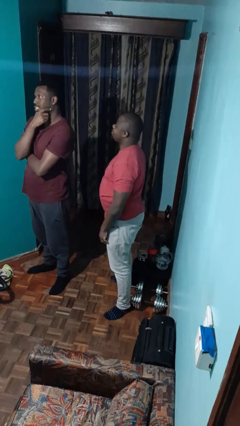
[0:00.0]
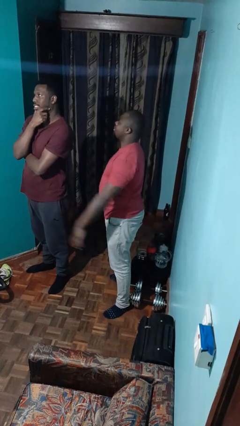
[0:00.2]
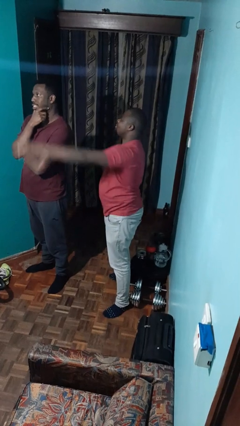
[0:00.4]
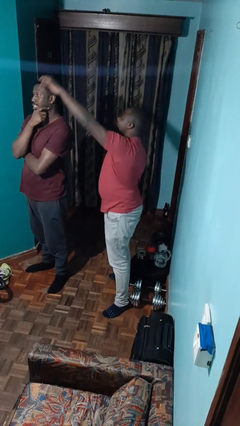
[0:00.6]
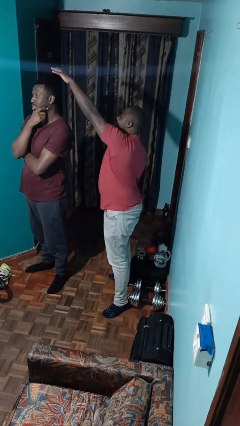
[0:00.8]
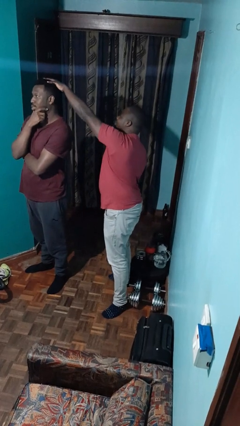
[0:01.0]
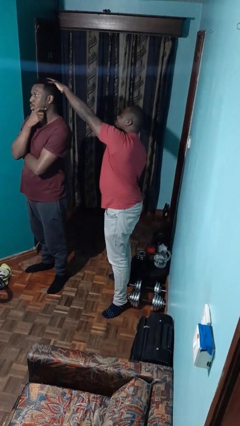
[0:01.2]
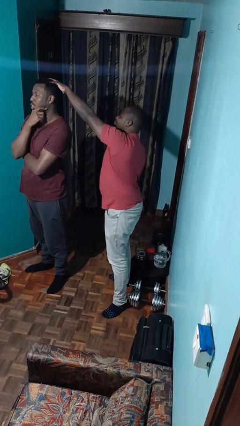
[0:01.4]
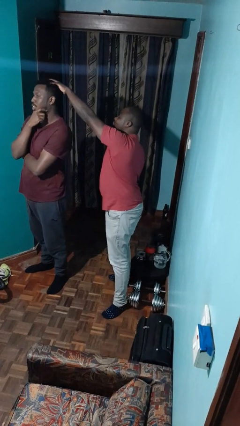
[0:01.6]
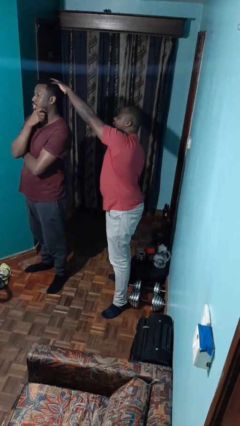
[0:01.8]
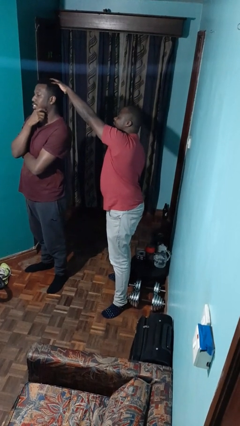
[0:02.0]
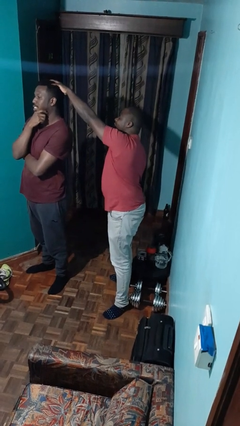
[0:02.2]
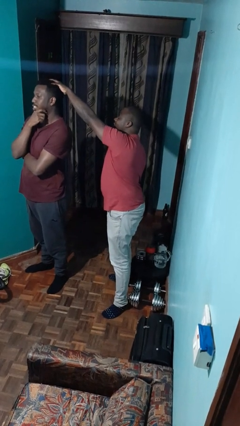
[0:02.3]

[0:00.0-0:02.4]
person grabs person by hair

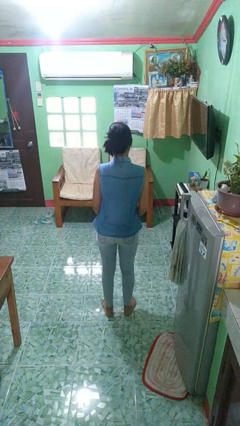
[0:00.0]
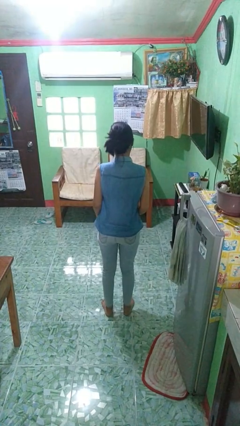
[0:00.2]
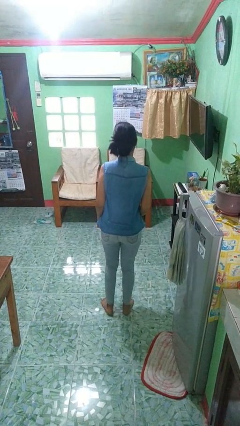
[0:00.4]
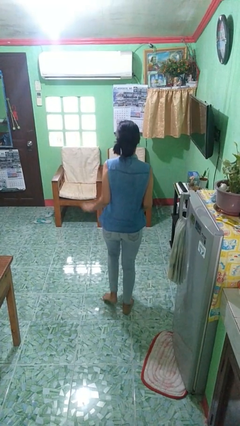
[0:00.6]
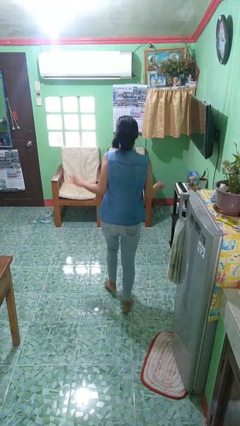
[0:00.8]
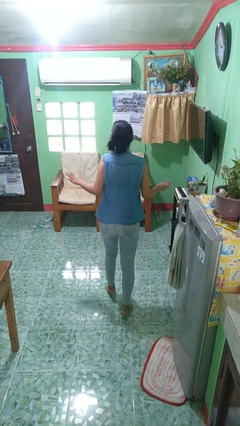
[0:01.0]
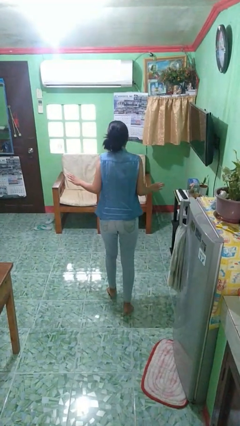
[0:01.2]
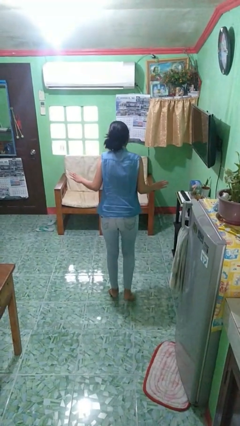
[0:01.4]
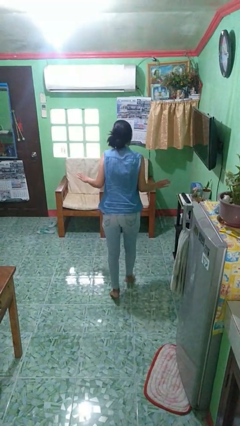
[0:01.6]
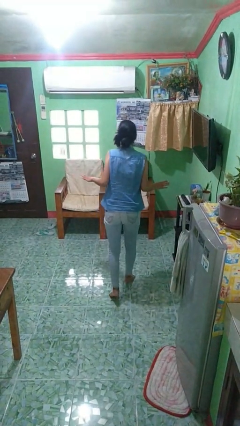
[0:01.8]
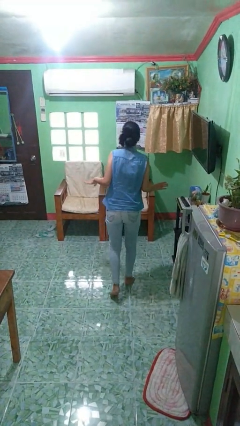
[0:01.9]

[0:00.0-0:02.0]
person walks tiptoe

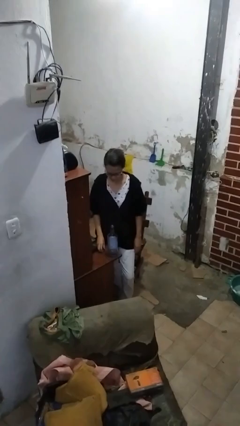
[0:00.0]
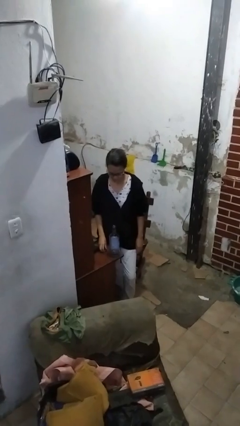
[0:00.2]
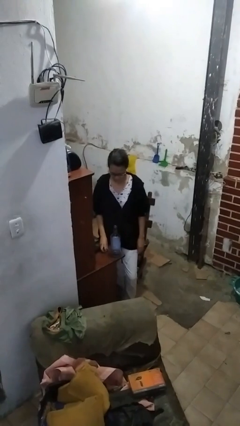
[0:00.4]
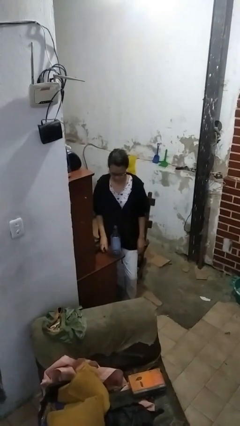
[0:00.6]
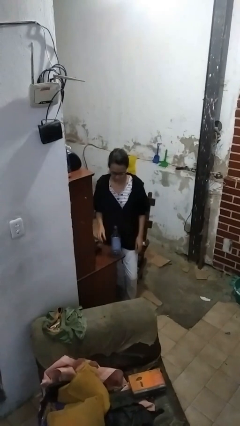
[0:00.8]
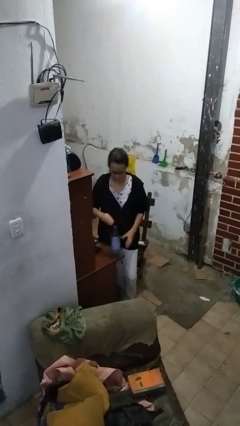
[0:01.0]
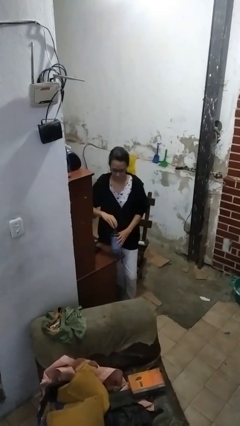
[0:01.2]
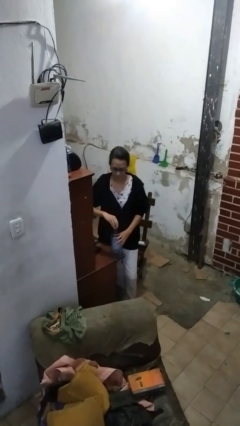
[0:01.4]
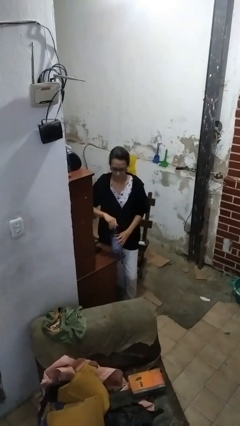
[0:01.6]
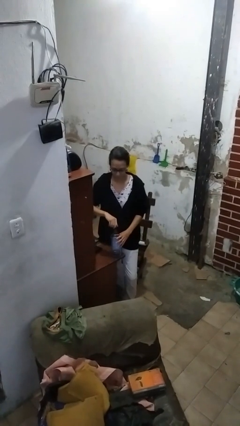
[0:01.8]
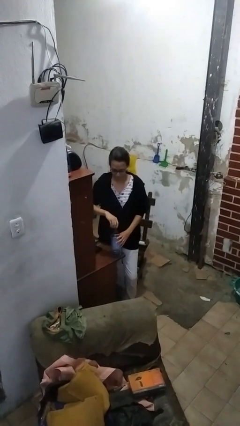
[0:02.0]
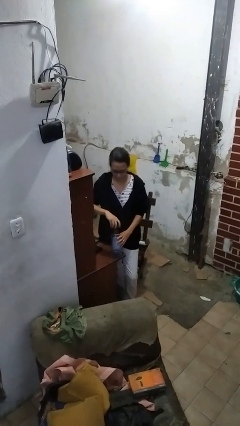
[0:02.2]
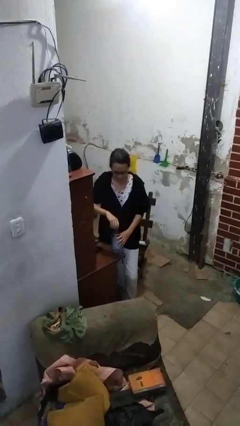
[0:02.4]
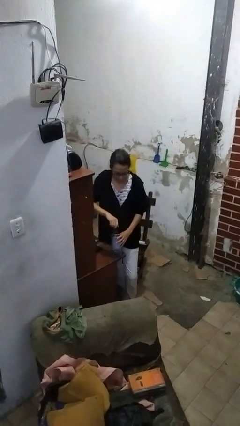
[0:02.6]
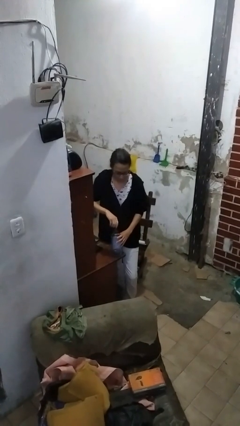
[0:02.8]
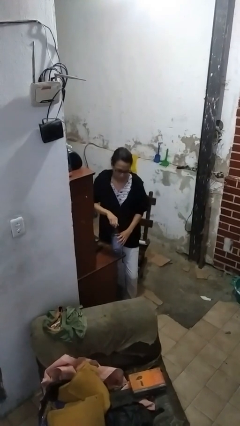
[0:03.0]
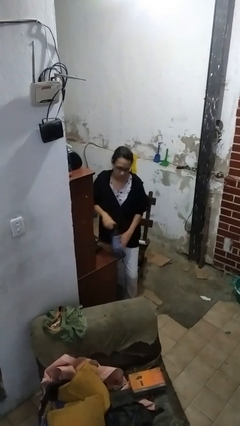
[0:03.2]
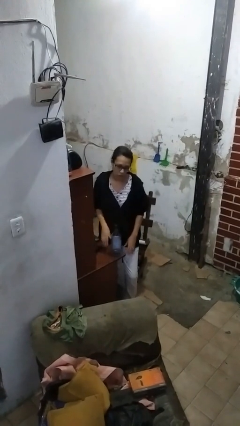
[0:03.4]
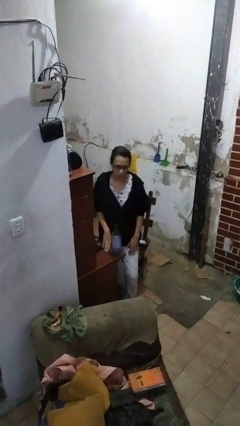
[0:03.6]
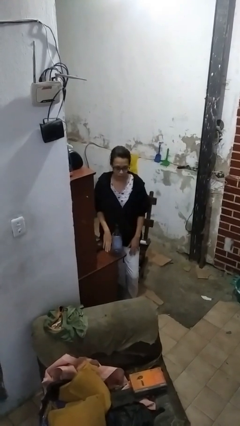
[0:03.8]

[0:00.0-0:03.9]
person screws lid to bottle

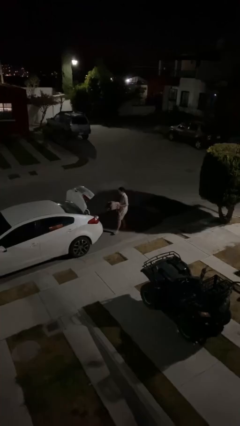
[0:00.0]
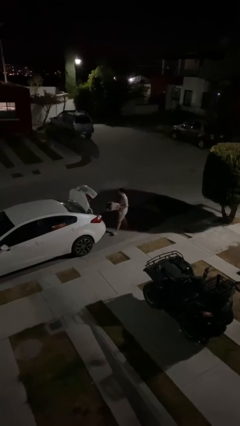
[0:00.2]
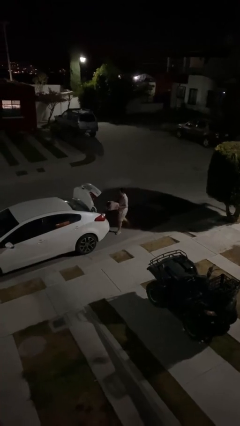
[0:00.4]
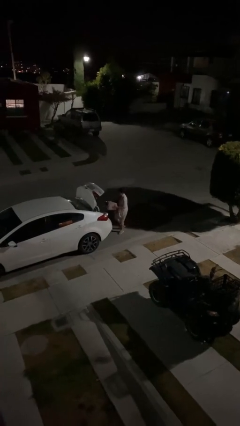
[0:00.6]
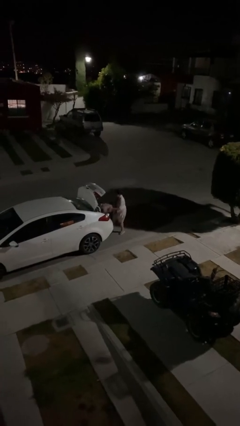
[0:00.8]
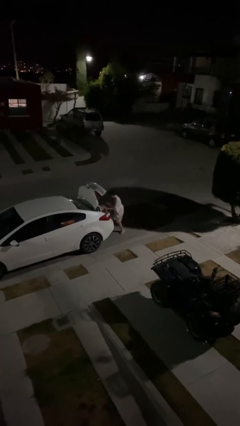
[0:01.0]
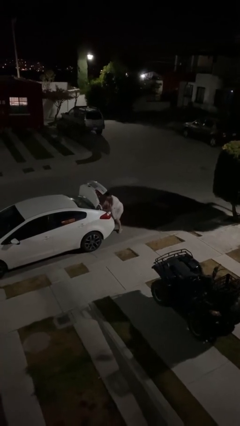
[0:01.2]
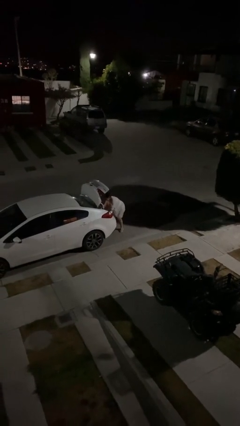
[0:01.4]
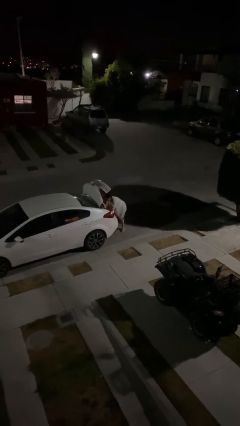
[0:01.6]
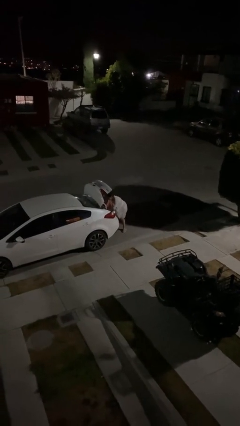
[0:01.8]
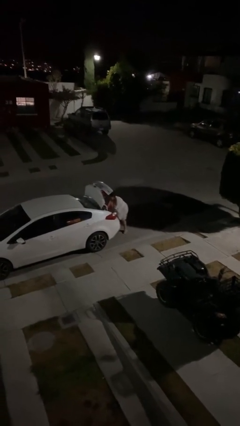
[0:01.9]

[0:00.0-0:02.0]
person loads car

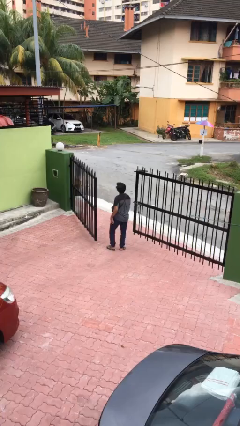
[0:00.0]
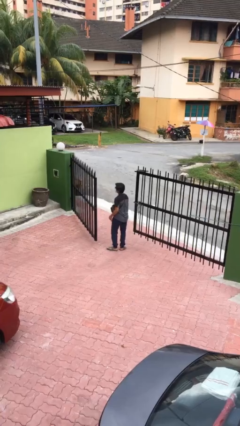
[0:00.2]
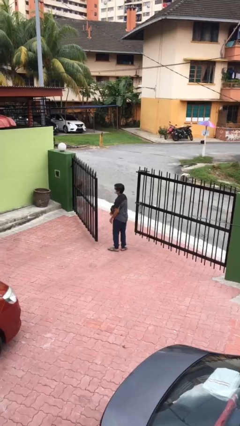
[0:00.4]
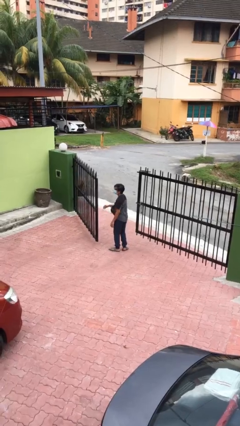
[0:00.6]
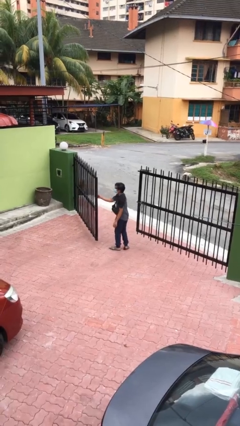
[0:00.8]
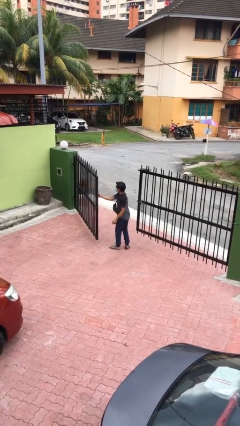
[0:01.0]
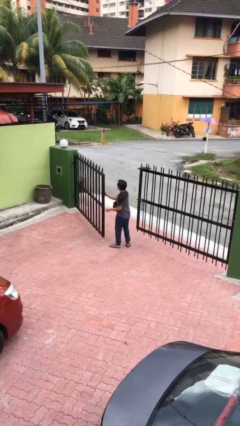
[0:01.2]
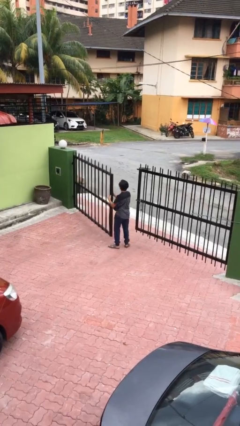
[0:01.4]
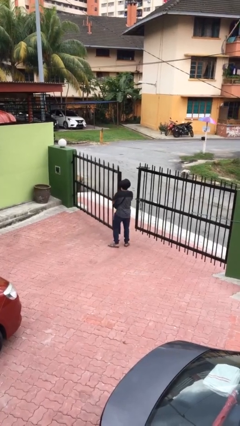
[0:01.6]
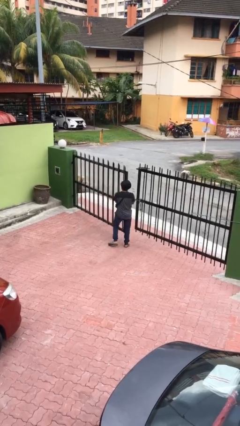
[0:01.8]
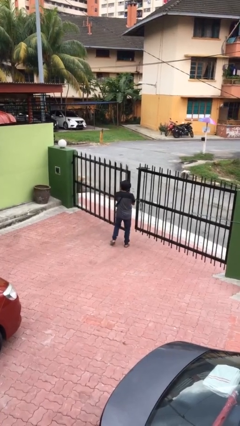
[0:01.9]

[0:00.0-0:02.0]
person closes facility door

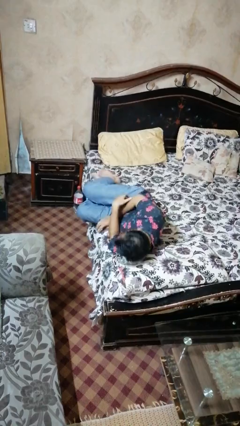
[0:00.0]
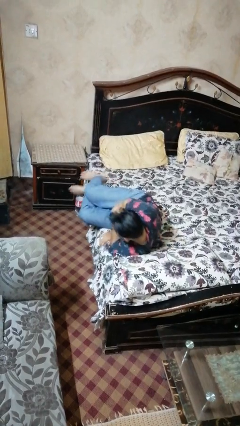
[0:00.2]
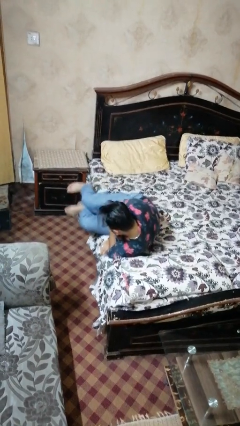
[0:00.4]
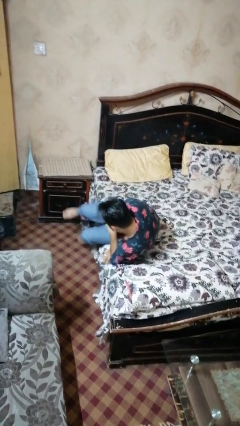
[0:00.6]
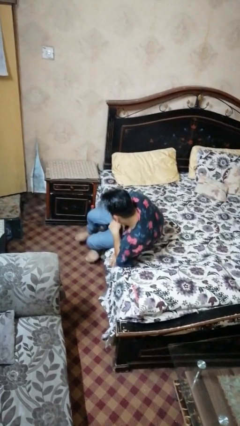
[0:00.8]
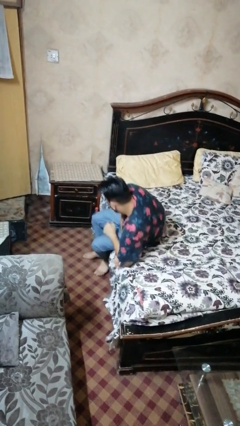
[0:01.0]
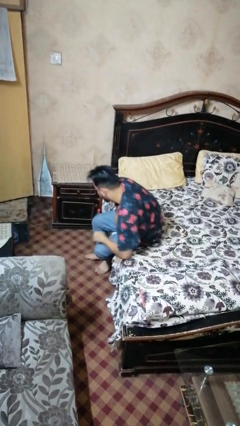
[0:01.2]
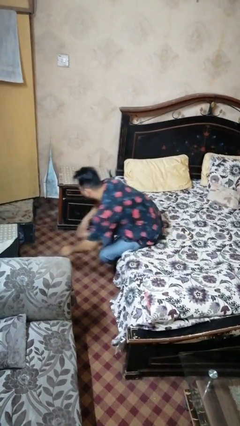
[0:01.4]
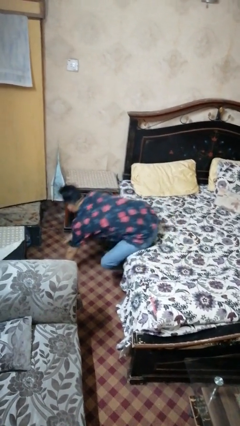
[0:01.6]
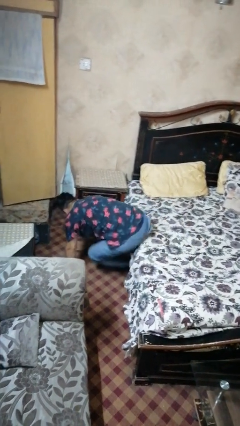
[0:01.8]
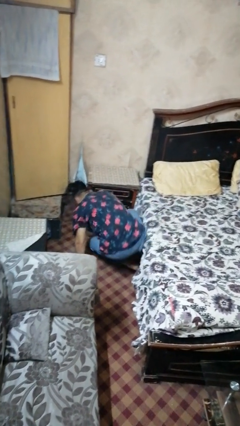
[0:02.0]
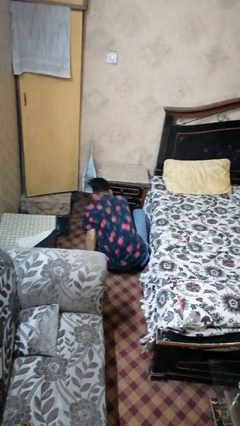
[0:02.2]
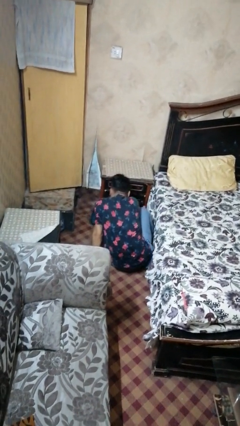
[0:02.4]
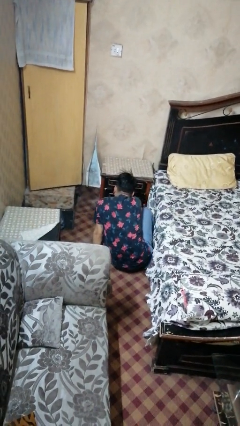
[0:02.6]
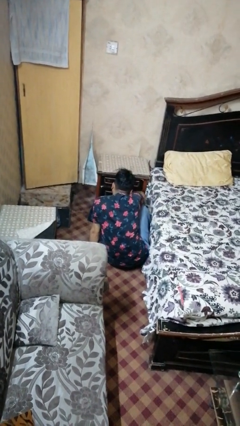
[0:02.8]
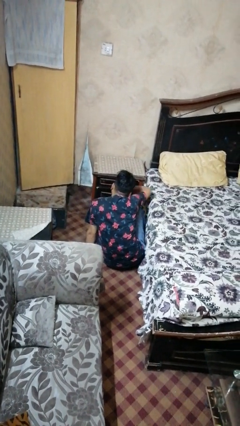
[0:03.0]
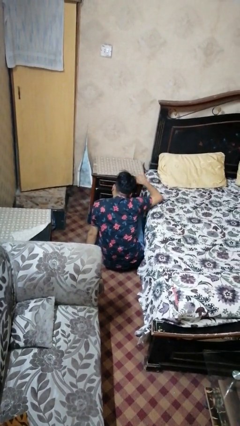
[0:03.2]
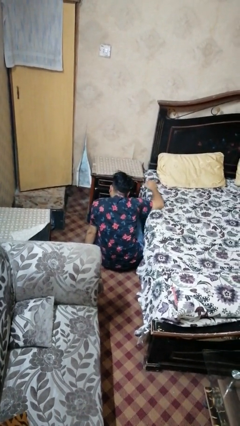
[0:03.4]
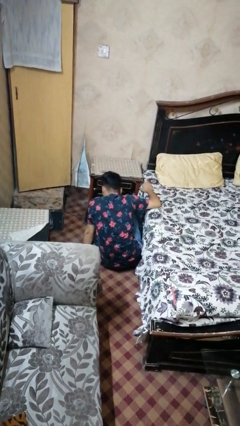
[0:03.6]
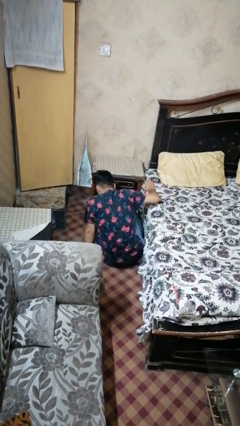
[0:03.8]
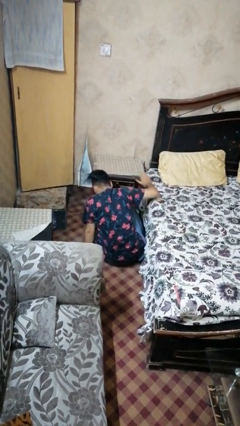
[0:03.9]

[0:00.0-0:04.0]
person falls from bed

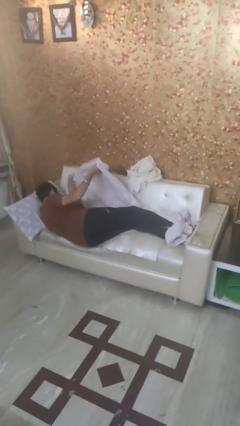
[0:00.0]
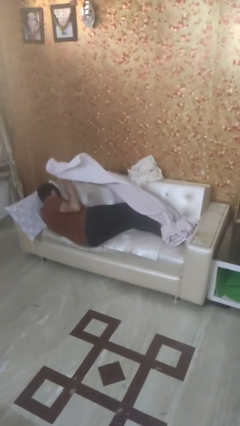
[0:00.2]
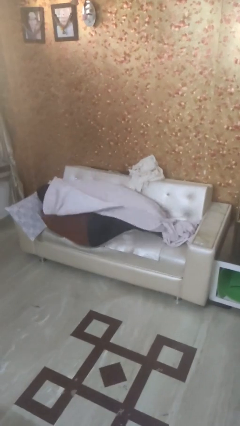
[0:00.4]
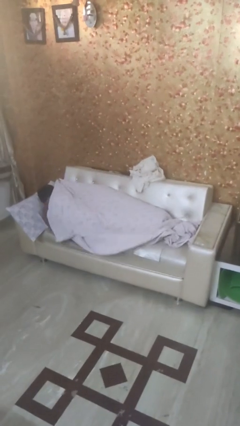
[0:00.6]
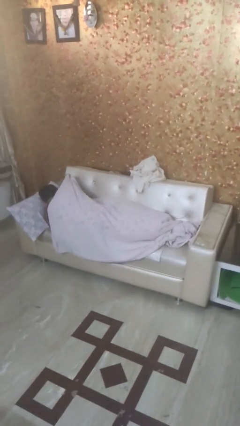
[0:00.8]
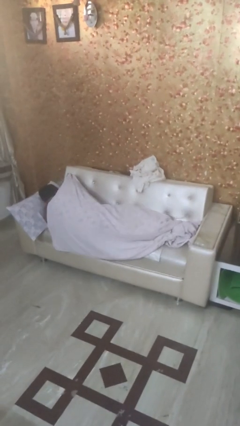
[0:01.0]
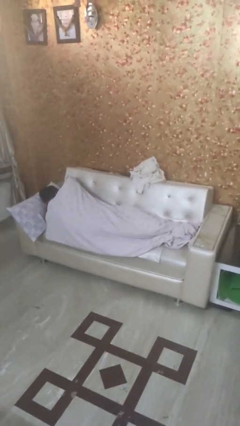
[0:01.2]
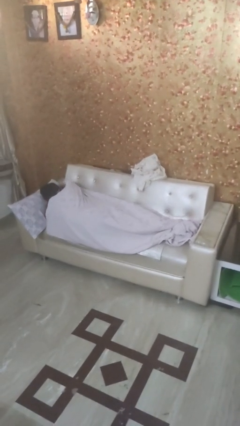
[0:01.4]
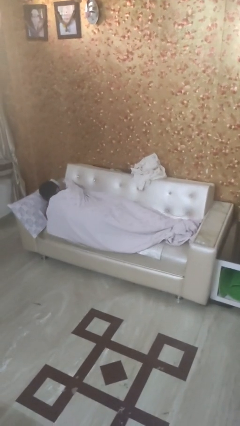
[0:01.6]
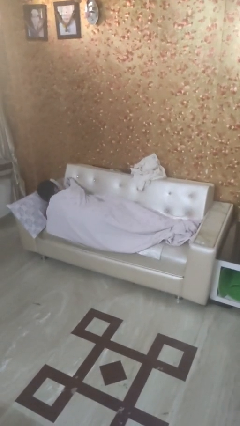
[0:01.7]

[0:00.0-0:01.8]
person covers with bedsheets
